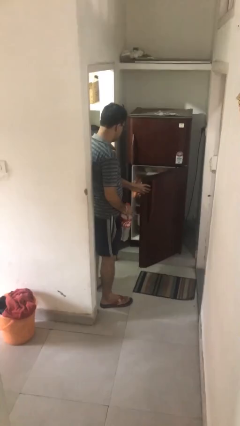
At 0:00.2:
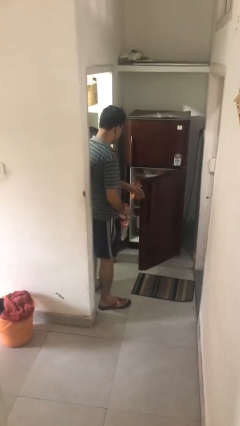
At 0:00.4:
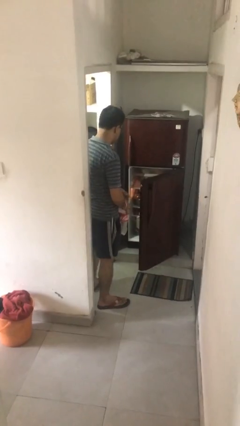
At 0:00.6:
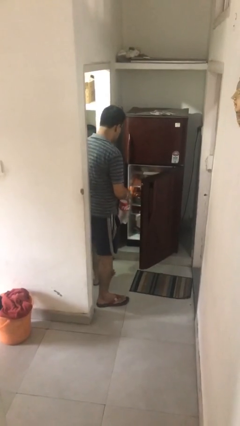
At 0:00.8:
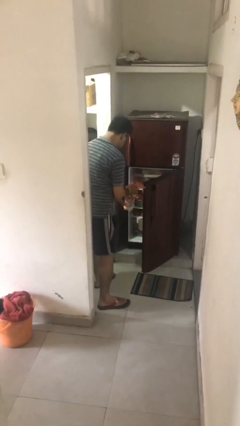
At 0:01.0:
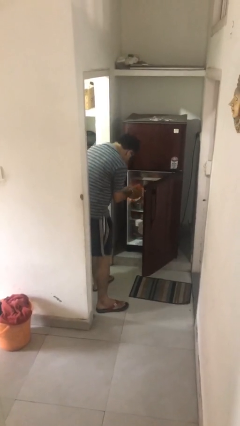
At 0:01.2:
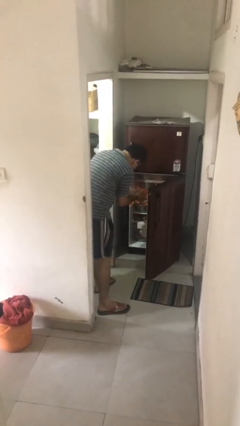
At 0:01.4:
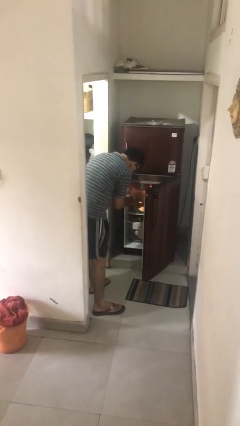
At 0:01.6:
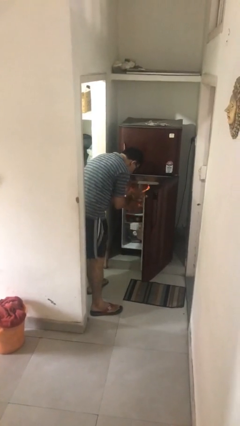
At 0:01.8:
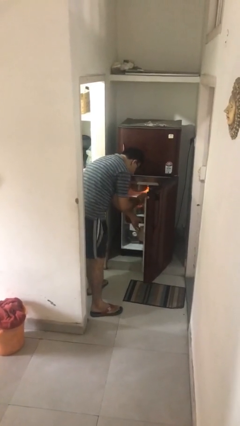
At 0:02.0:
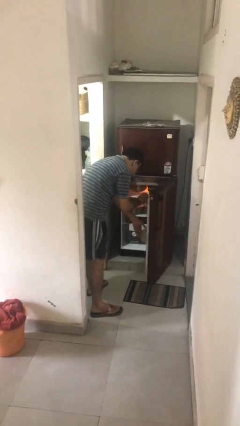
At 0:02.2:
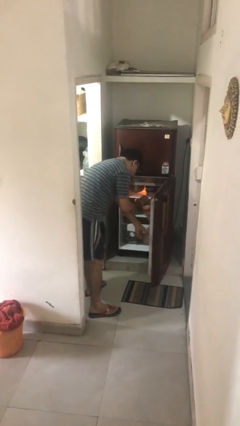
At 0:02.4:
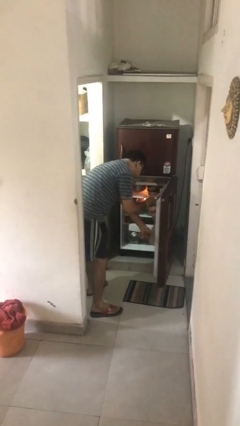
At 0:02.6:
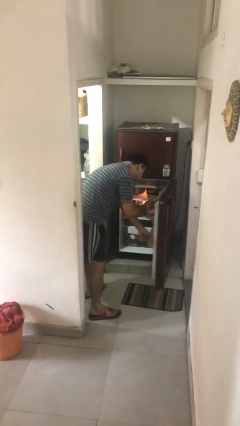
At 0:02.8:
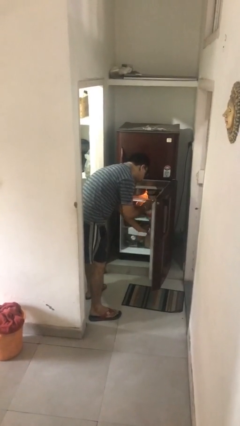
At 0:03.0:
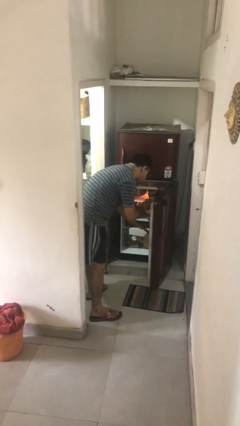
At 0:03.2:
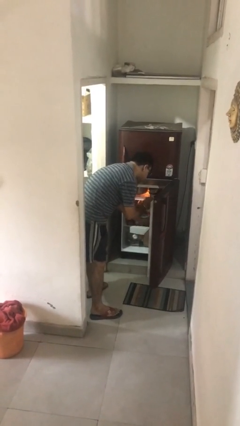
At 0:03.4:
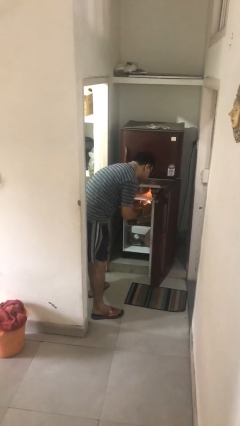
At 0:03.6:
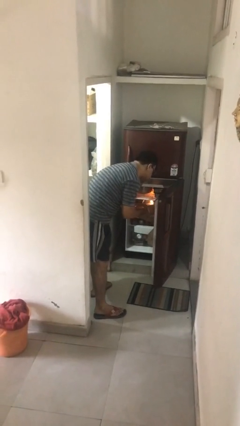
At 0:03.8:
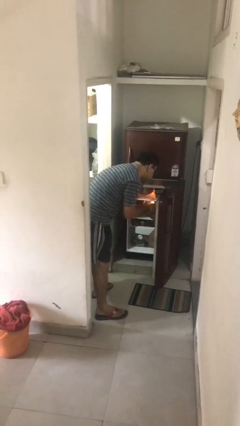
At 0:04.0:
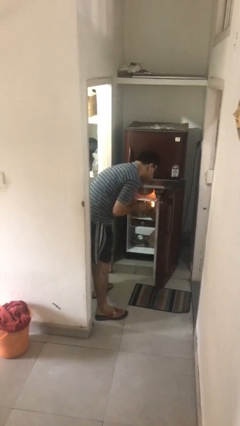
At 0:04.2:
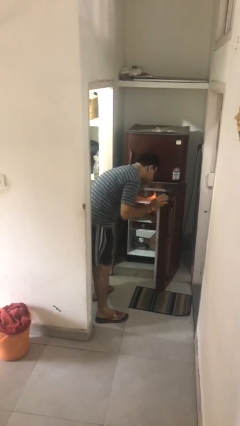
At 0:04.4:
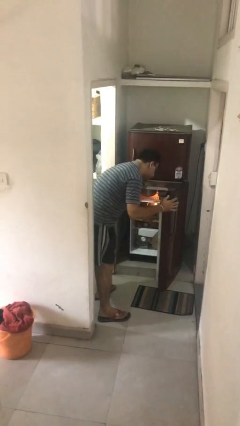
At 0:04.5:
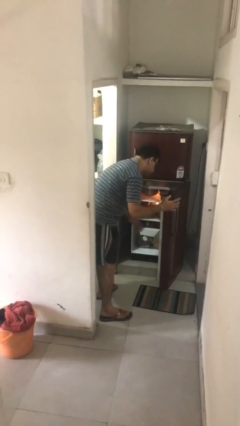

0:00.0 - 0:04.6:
person puts object into refrigerator

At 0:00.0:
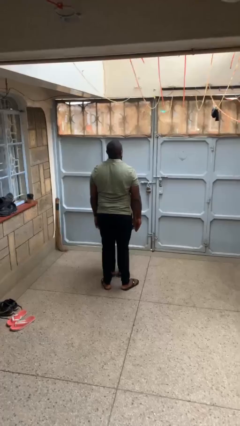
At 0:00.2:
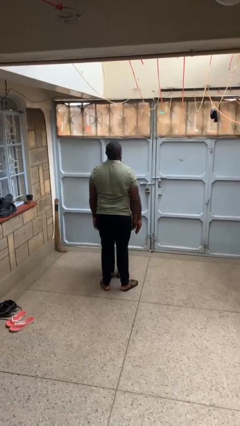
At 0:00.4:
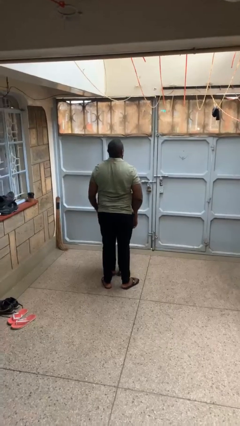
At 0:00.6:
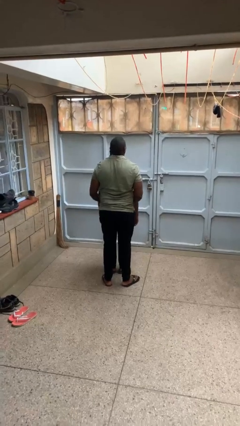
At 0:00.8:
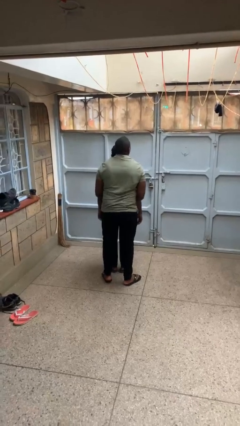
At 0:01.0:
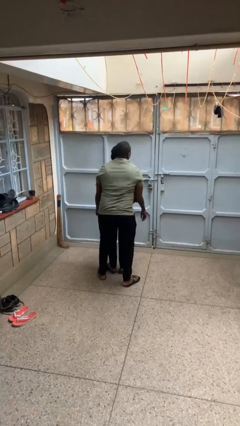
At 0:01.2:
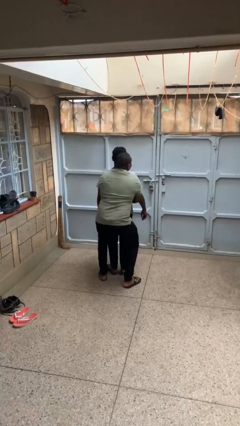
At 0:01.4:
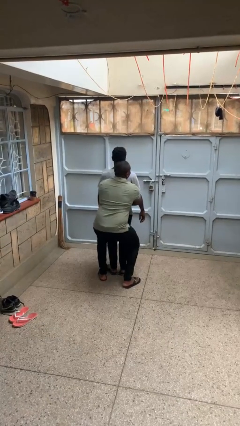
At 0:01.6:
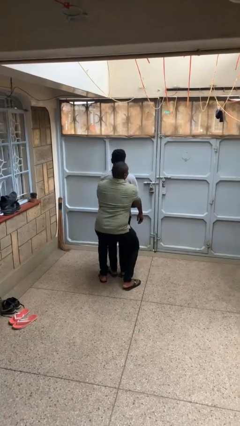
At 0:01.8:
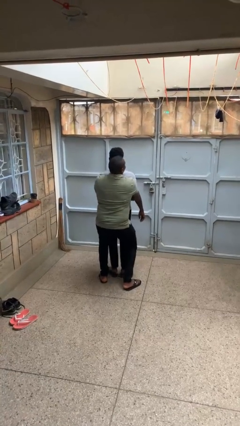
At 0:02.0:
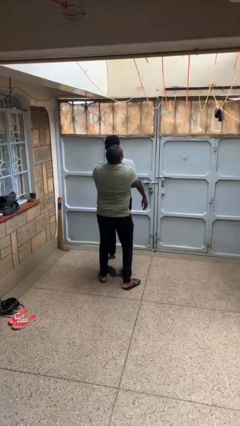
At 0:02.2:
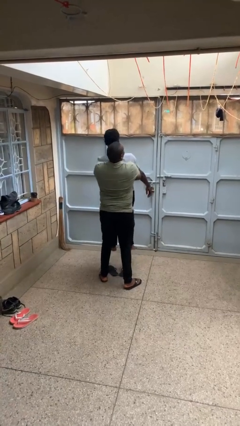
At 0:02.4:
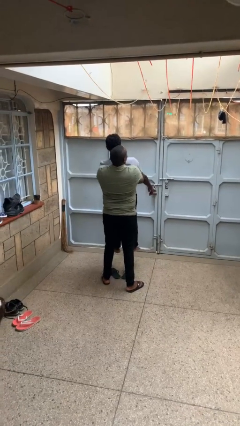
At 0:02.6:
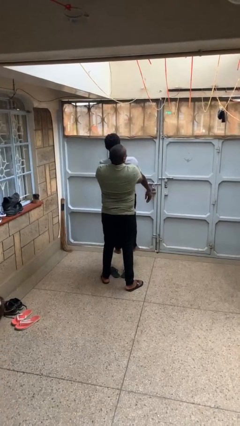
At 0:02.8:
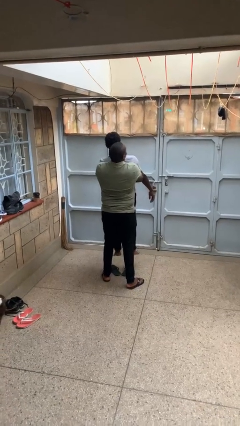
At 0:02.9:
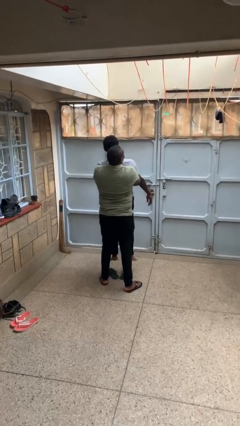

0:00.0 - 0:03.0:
person picks up person

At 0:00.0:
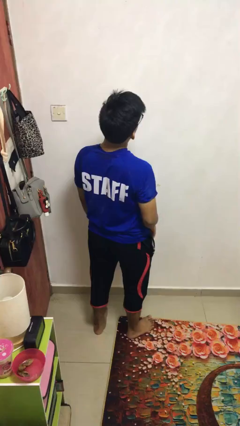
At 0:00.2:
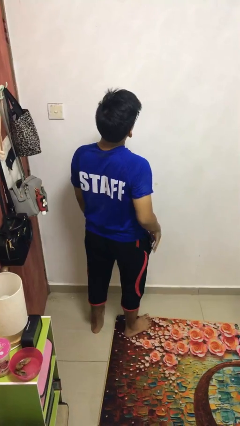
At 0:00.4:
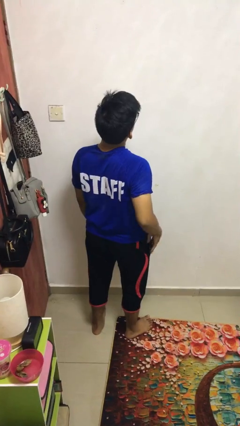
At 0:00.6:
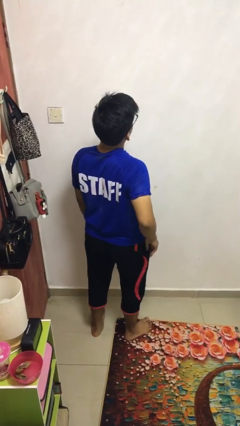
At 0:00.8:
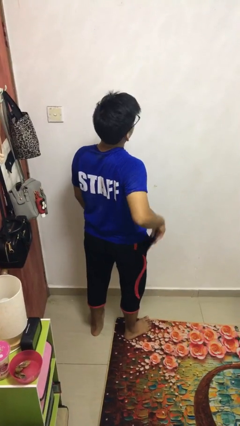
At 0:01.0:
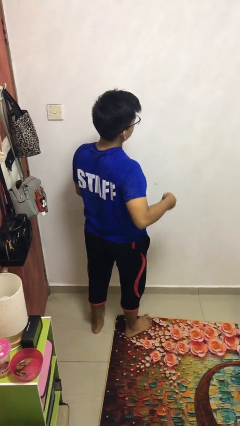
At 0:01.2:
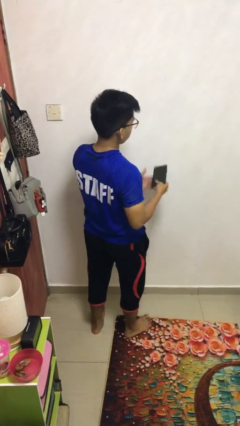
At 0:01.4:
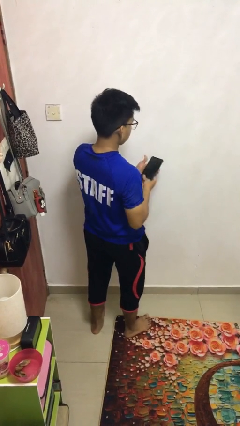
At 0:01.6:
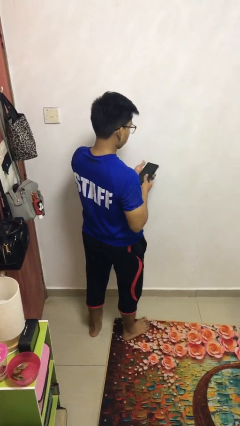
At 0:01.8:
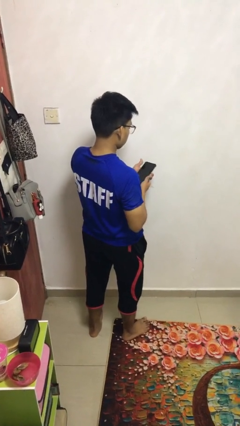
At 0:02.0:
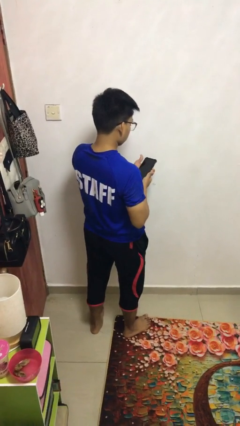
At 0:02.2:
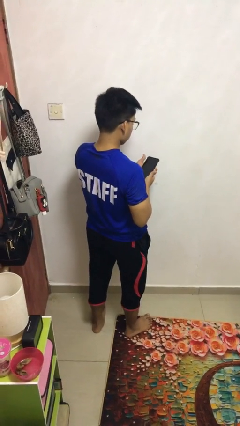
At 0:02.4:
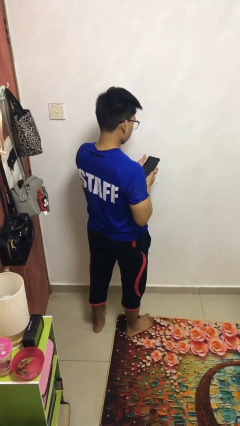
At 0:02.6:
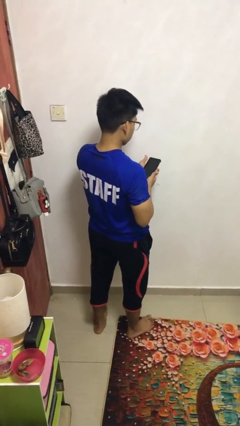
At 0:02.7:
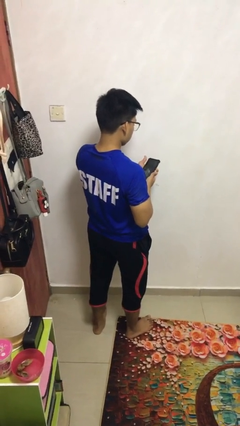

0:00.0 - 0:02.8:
person takes phone from pocket

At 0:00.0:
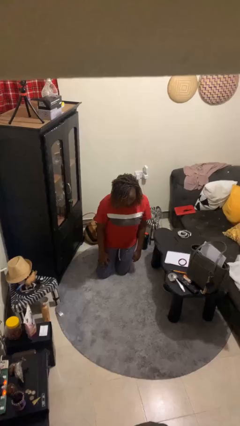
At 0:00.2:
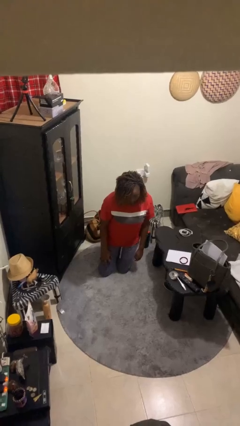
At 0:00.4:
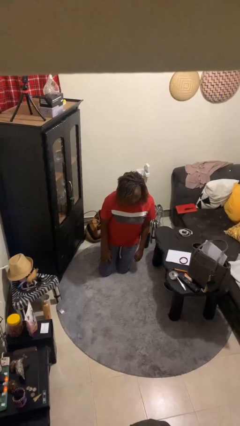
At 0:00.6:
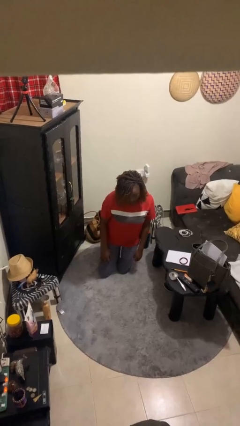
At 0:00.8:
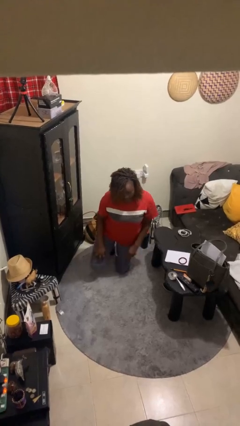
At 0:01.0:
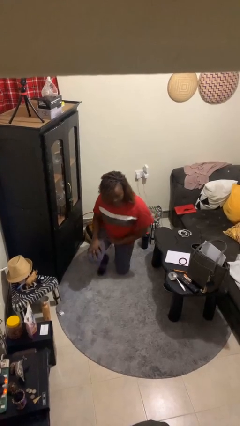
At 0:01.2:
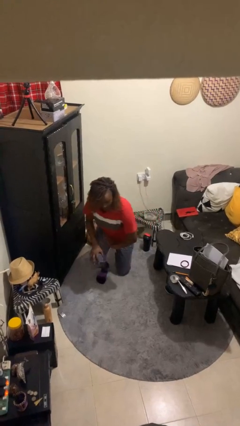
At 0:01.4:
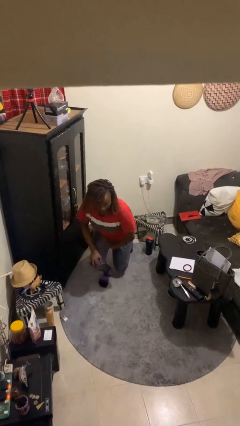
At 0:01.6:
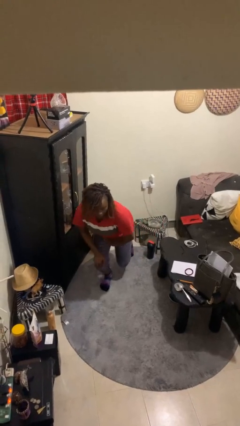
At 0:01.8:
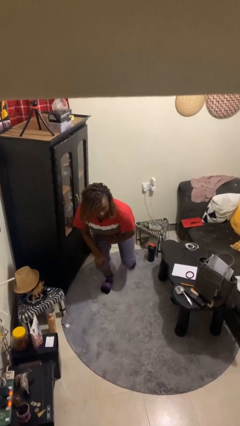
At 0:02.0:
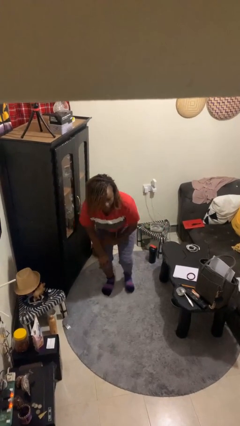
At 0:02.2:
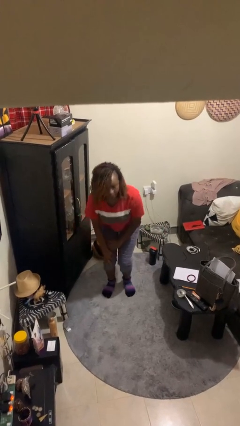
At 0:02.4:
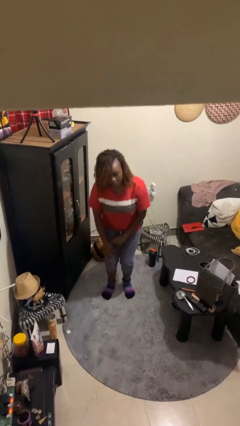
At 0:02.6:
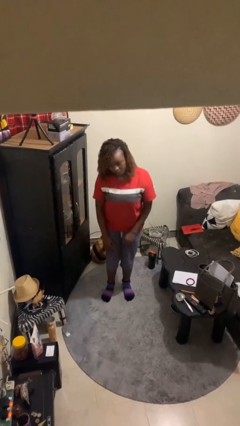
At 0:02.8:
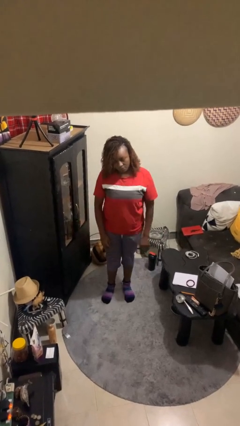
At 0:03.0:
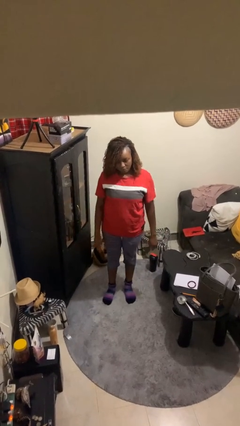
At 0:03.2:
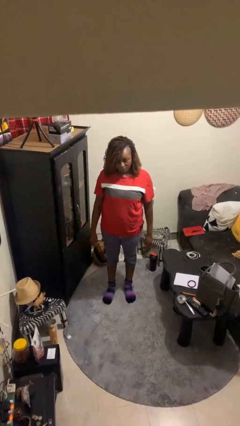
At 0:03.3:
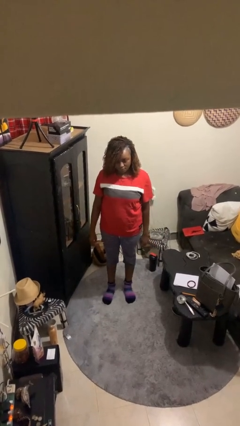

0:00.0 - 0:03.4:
person stands up from floor

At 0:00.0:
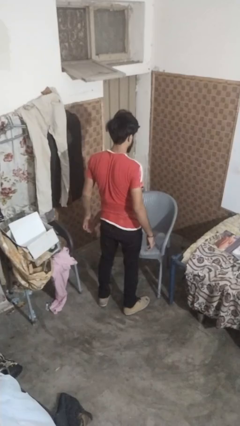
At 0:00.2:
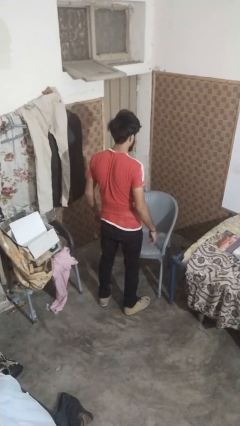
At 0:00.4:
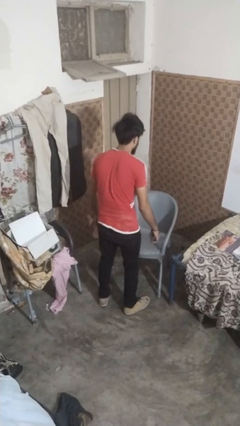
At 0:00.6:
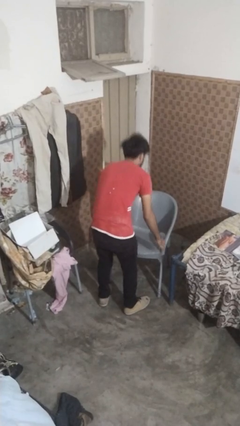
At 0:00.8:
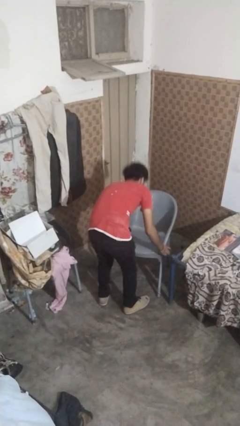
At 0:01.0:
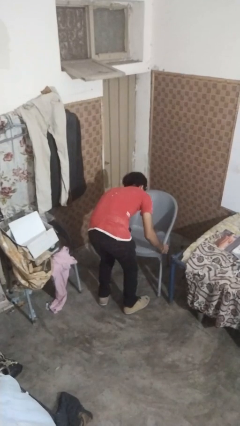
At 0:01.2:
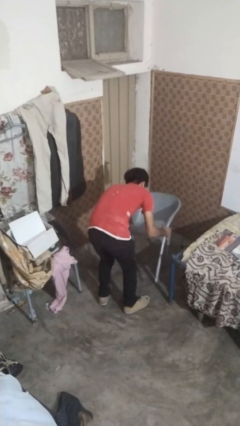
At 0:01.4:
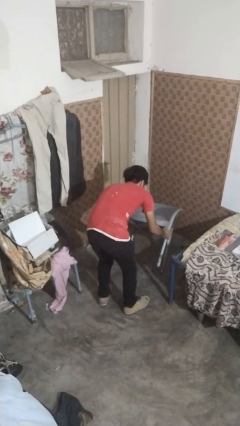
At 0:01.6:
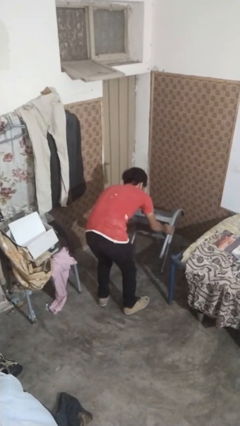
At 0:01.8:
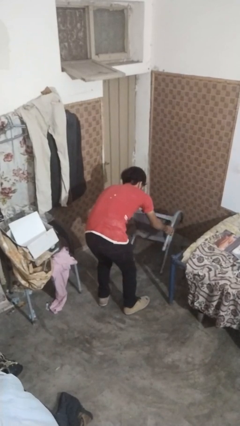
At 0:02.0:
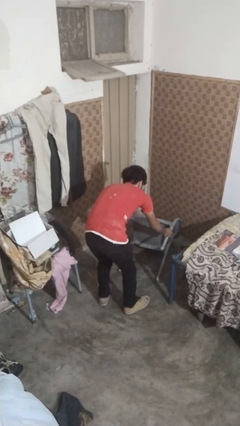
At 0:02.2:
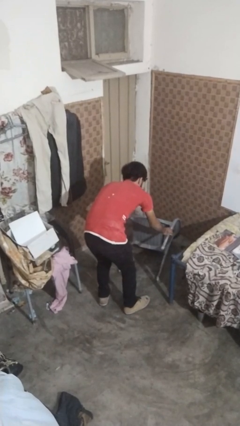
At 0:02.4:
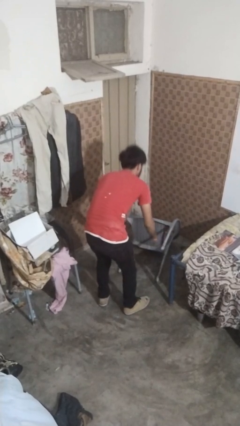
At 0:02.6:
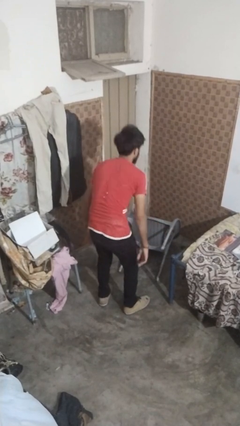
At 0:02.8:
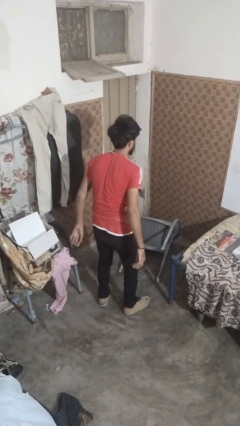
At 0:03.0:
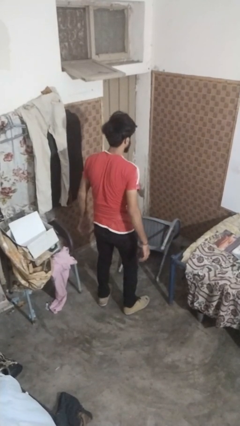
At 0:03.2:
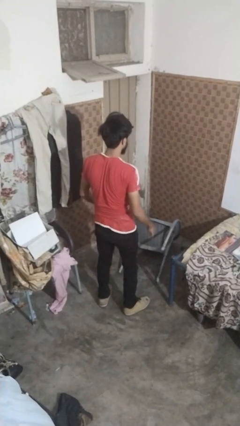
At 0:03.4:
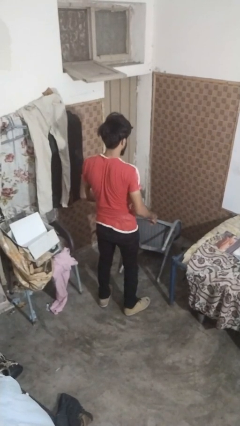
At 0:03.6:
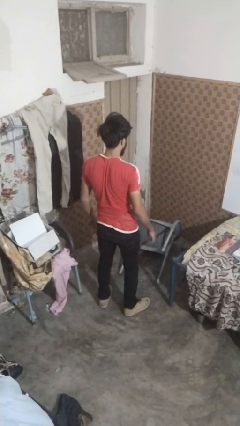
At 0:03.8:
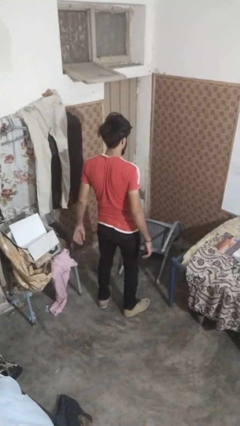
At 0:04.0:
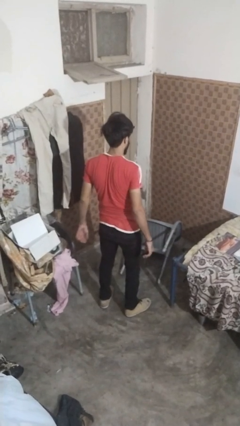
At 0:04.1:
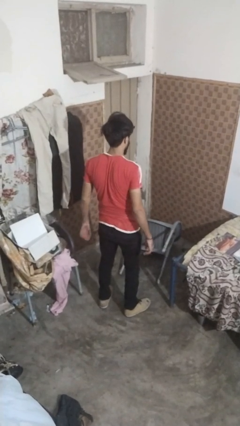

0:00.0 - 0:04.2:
person knocks over furniture
